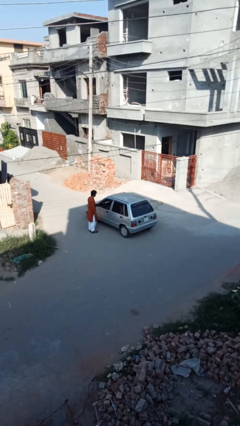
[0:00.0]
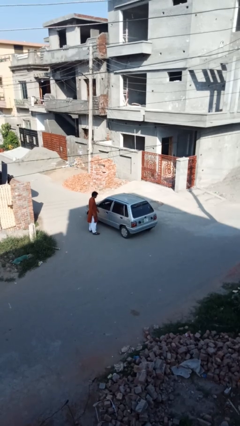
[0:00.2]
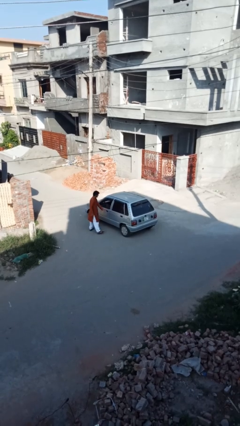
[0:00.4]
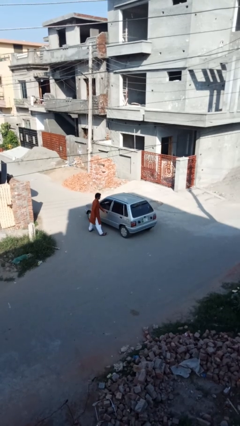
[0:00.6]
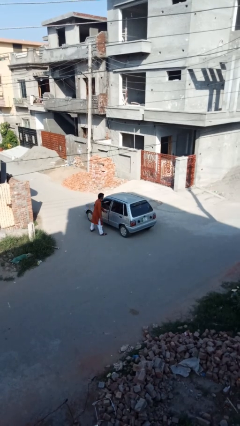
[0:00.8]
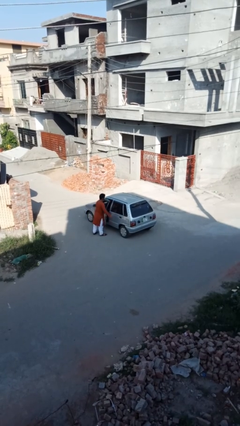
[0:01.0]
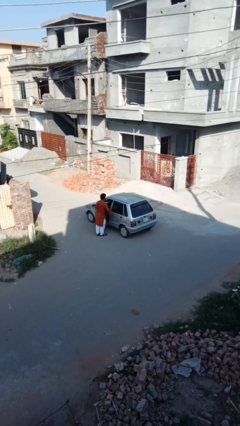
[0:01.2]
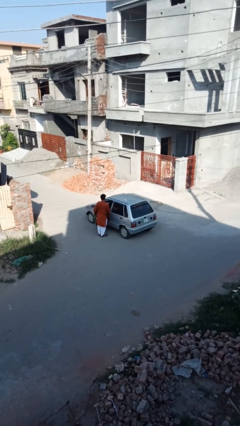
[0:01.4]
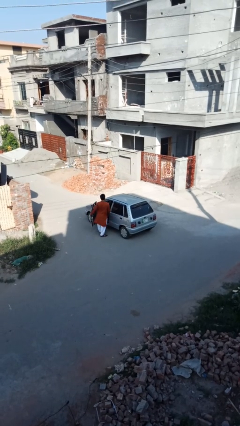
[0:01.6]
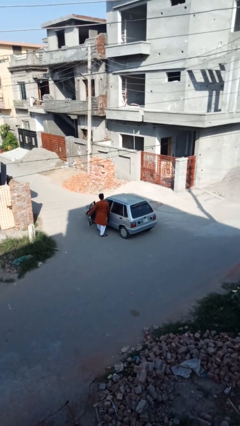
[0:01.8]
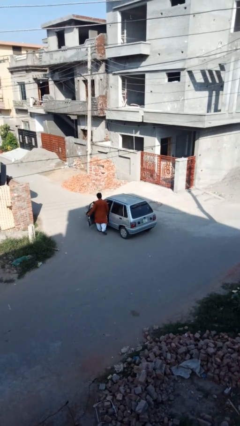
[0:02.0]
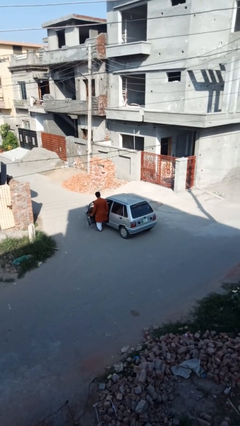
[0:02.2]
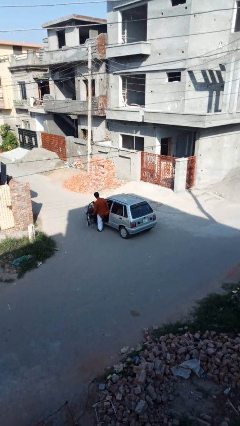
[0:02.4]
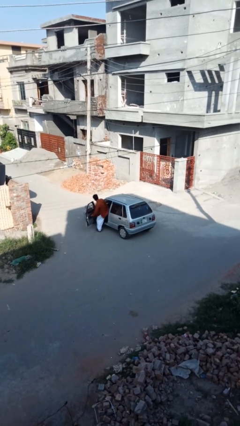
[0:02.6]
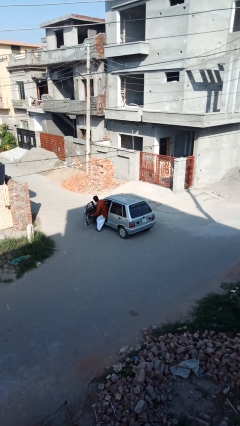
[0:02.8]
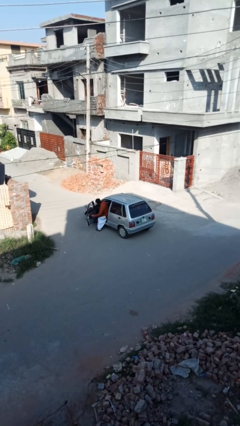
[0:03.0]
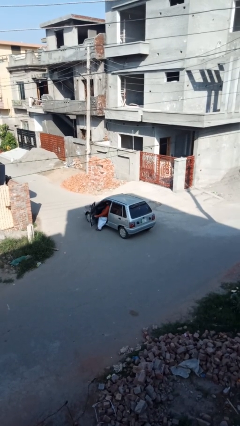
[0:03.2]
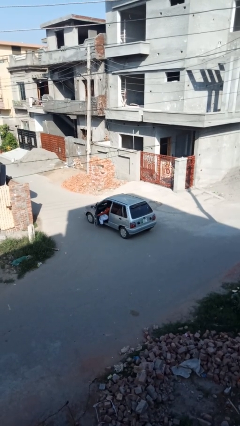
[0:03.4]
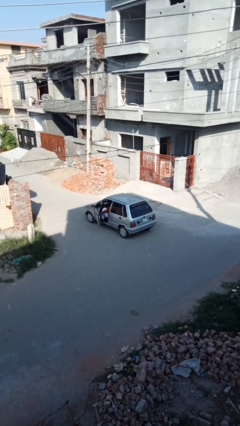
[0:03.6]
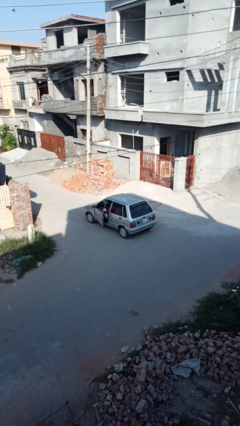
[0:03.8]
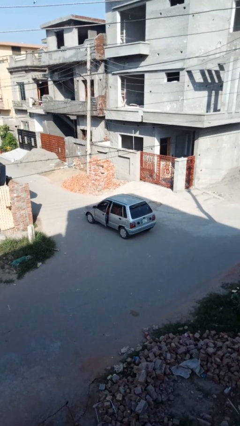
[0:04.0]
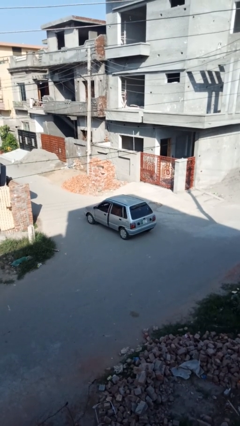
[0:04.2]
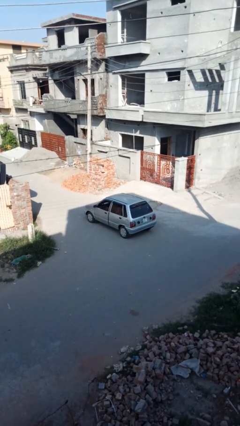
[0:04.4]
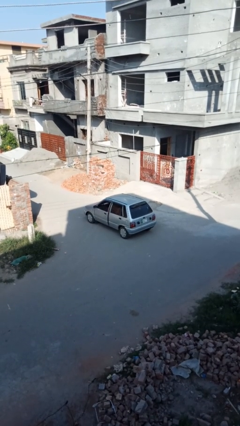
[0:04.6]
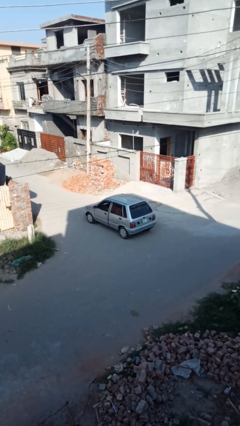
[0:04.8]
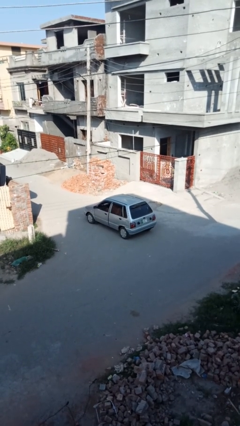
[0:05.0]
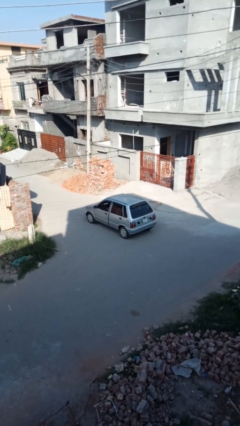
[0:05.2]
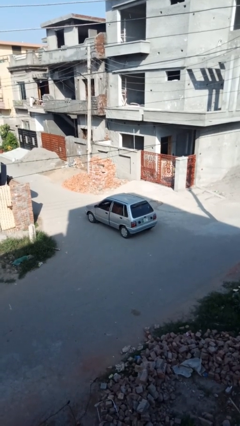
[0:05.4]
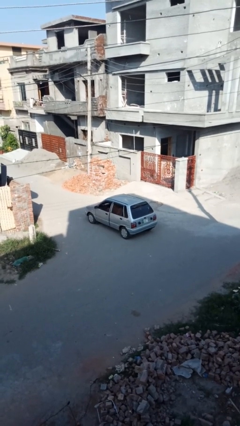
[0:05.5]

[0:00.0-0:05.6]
car picks up person

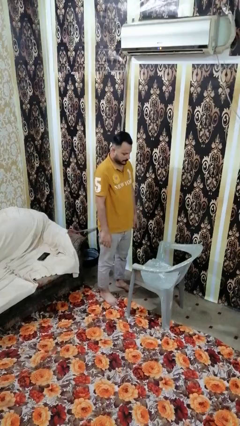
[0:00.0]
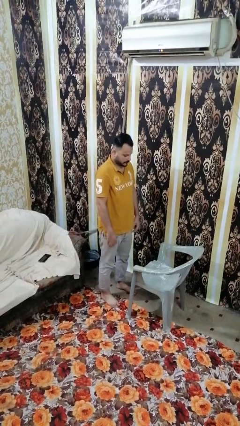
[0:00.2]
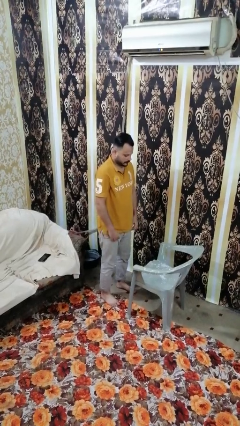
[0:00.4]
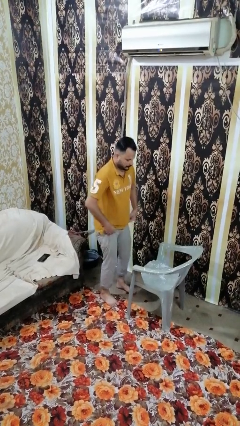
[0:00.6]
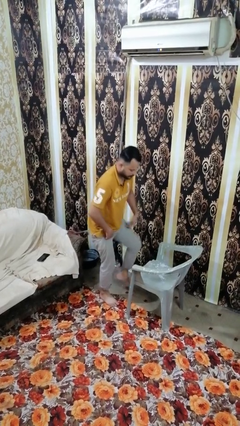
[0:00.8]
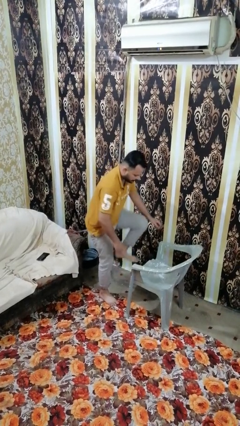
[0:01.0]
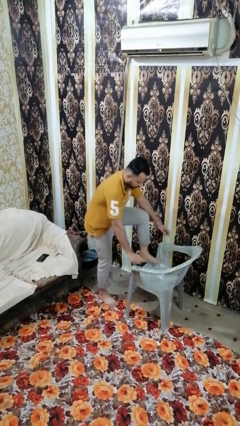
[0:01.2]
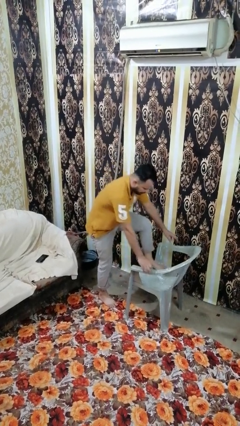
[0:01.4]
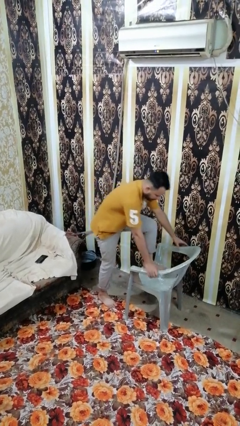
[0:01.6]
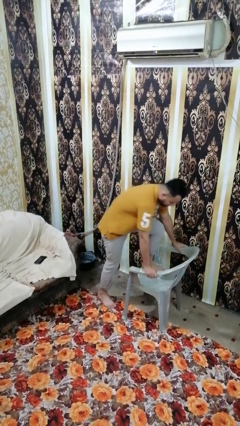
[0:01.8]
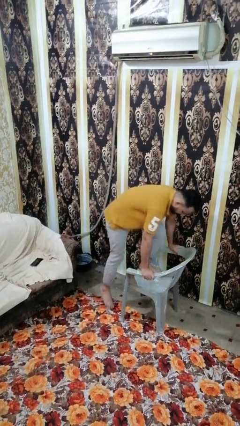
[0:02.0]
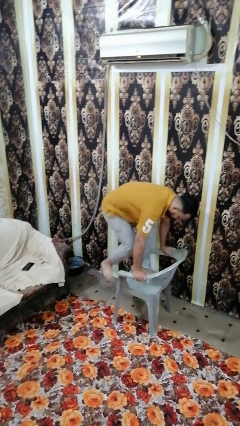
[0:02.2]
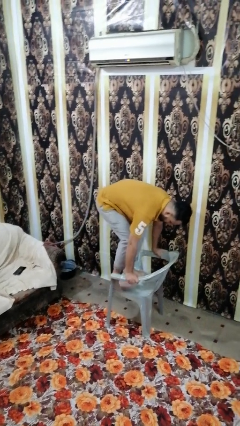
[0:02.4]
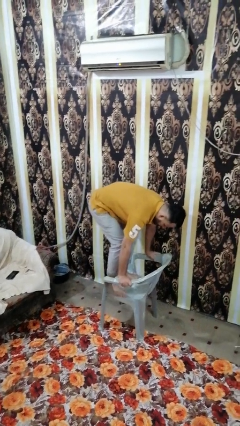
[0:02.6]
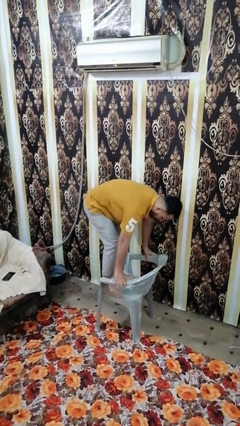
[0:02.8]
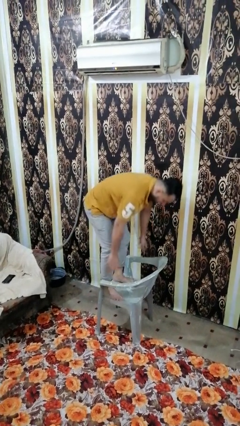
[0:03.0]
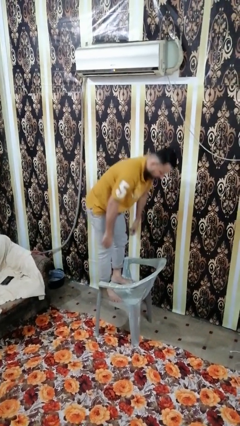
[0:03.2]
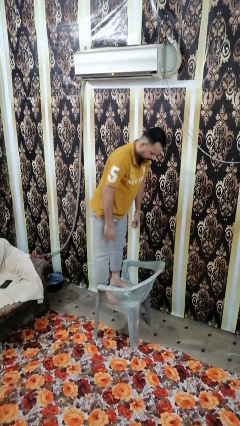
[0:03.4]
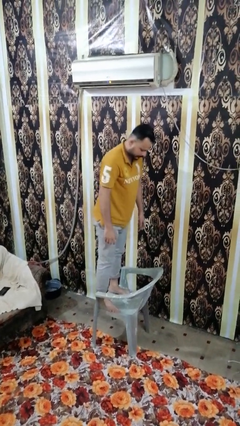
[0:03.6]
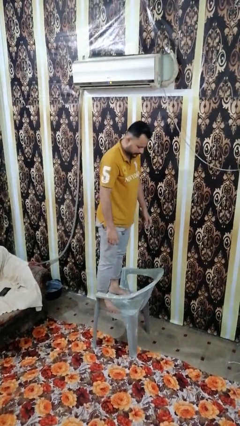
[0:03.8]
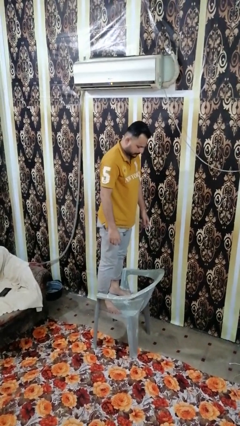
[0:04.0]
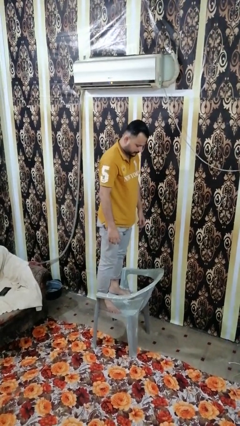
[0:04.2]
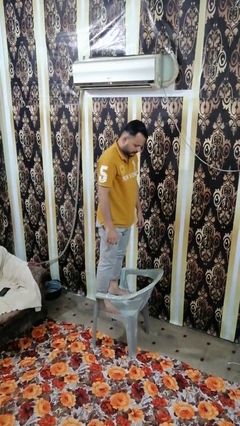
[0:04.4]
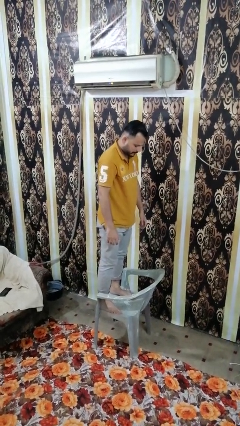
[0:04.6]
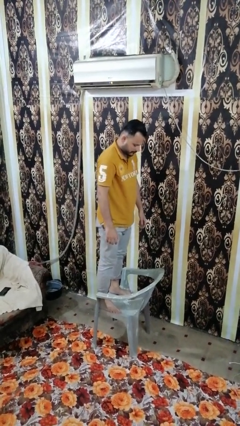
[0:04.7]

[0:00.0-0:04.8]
person climbs on chair

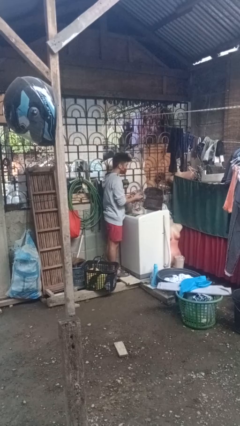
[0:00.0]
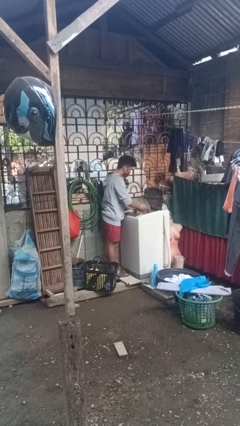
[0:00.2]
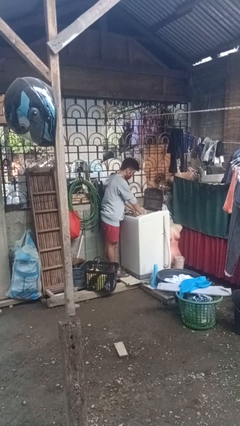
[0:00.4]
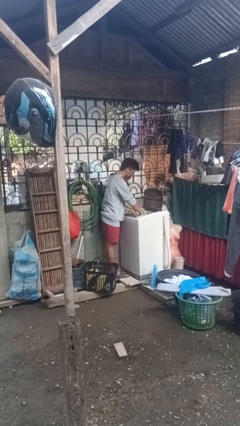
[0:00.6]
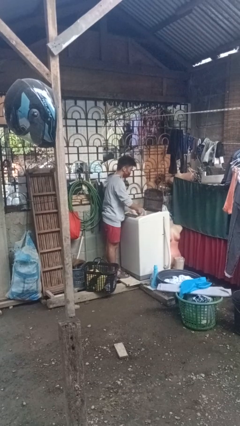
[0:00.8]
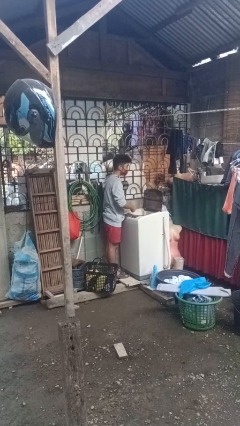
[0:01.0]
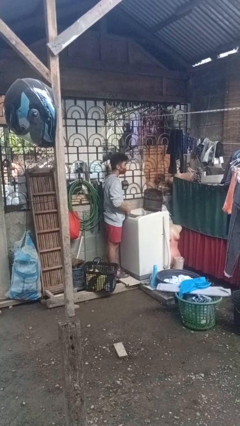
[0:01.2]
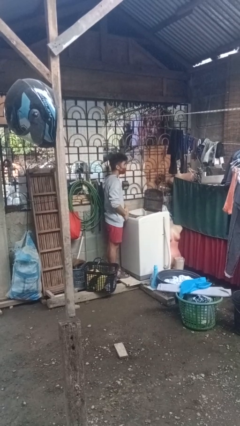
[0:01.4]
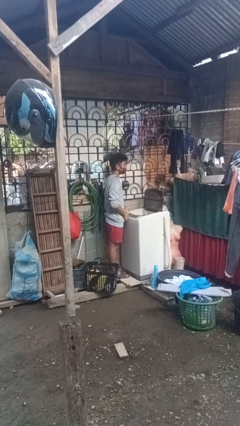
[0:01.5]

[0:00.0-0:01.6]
person loads dryer

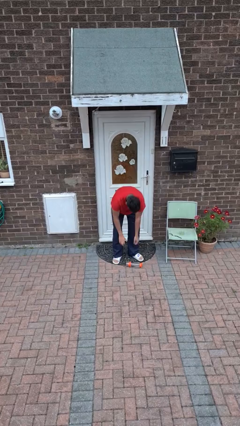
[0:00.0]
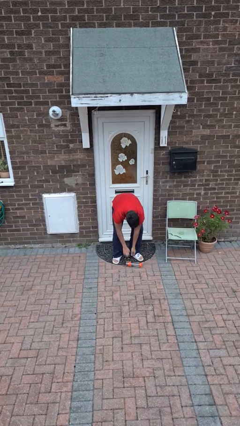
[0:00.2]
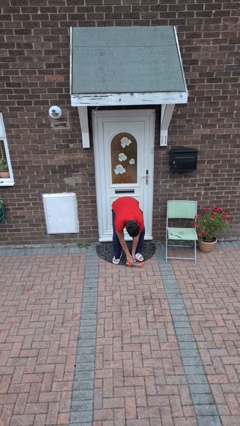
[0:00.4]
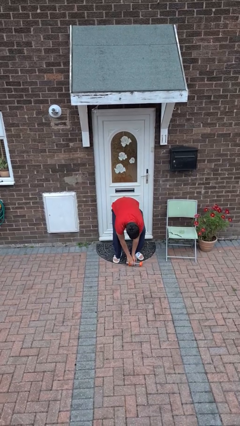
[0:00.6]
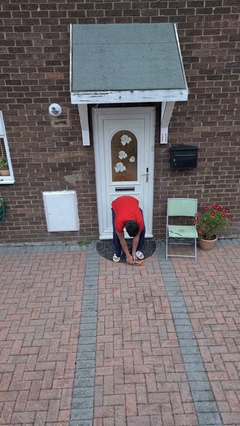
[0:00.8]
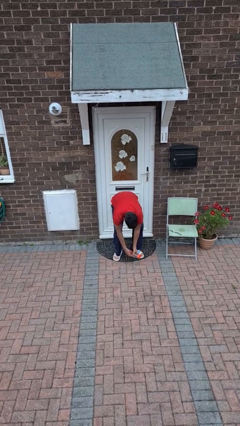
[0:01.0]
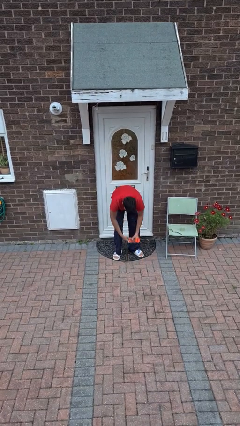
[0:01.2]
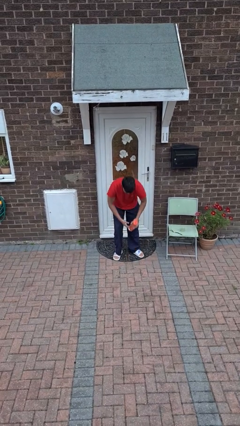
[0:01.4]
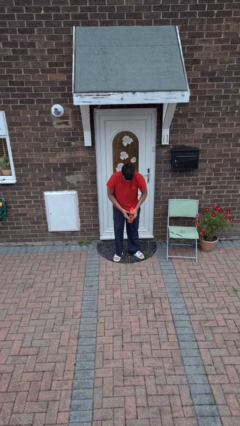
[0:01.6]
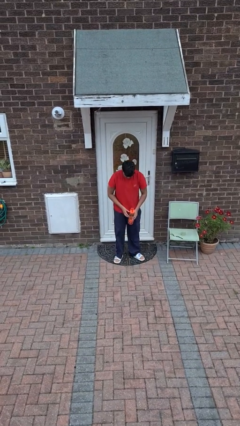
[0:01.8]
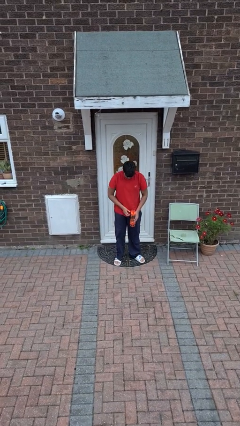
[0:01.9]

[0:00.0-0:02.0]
person picks up object from floor

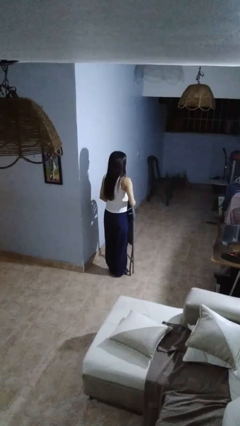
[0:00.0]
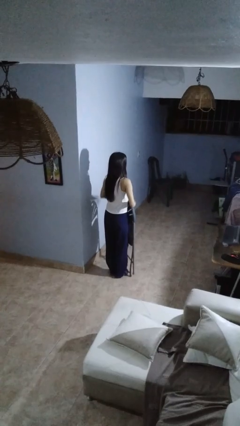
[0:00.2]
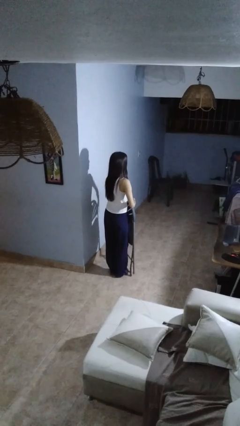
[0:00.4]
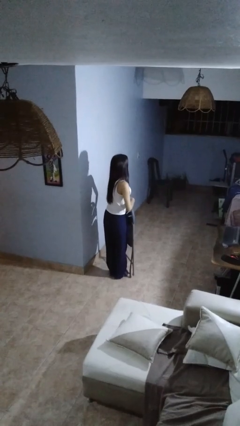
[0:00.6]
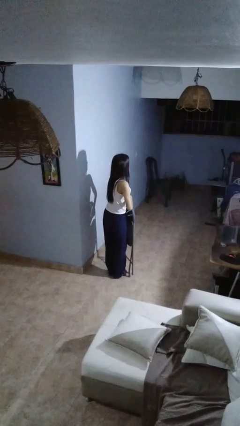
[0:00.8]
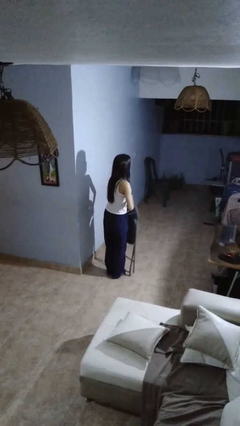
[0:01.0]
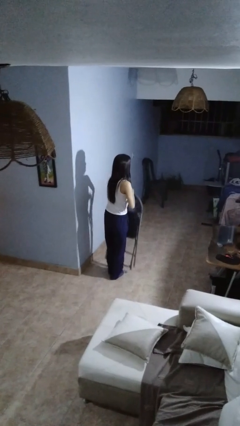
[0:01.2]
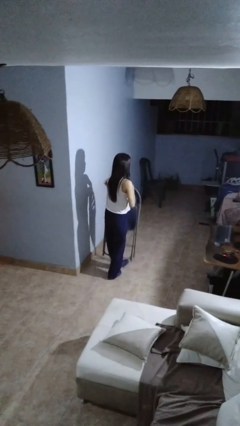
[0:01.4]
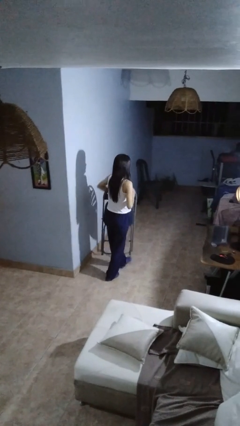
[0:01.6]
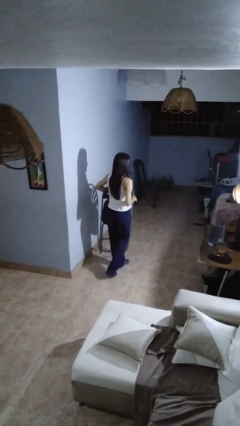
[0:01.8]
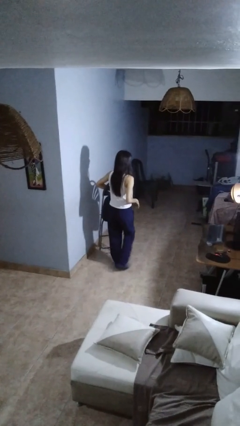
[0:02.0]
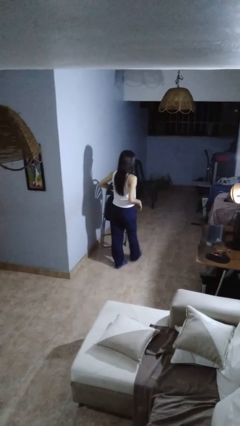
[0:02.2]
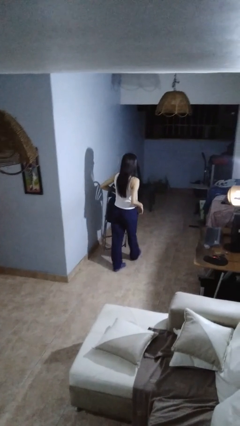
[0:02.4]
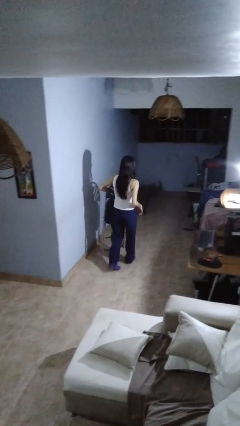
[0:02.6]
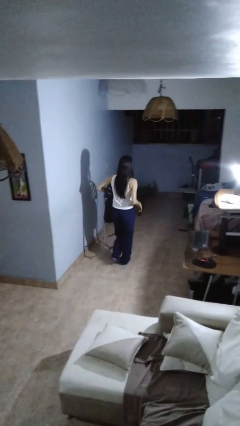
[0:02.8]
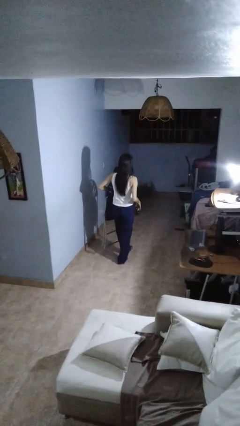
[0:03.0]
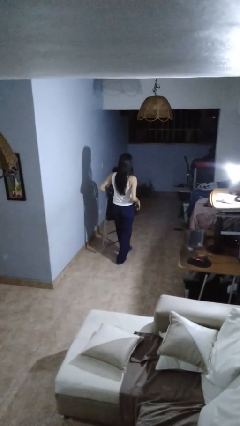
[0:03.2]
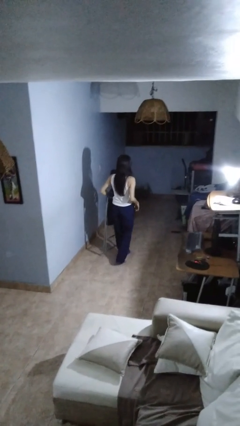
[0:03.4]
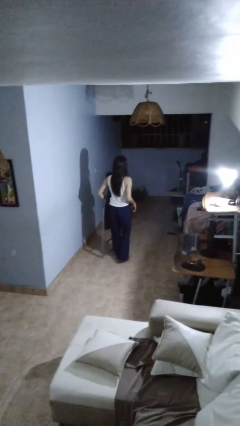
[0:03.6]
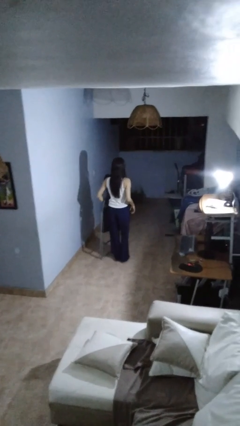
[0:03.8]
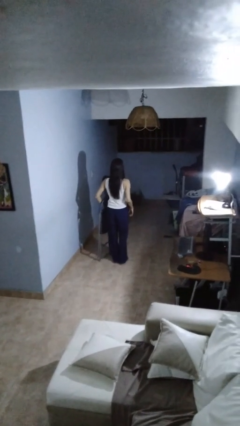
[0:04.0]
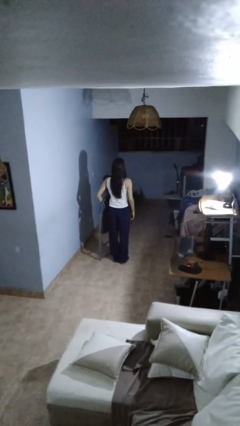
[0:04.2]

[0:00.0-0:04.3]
person carries furniture
